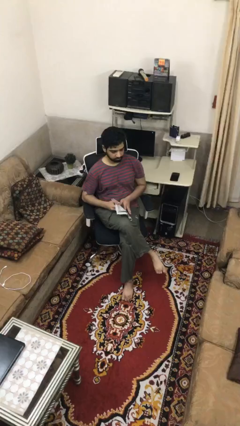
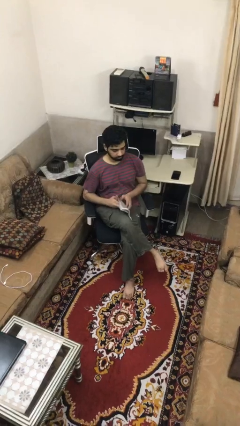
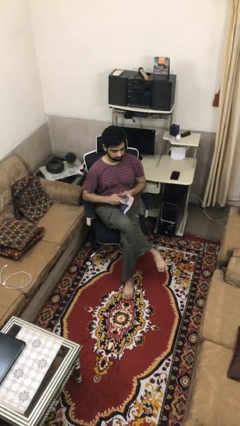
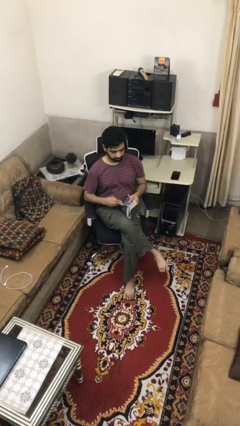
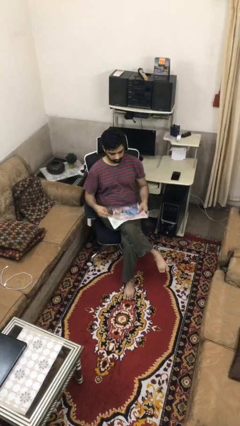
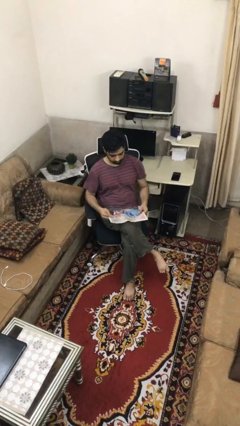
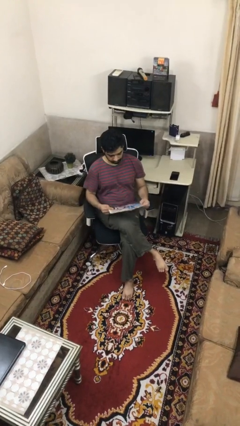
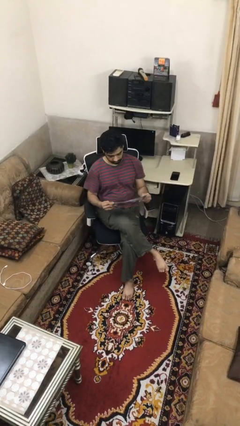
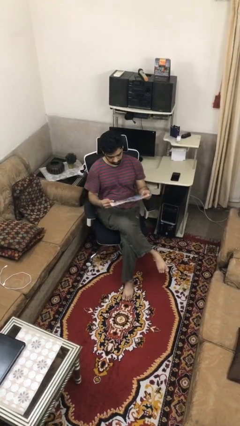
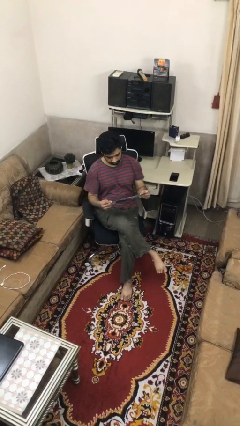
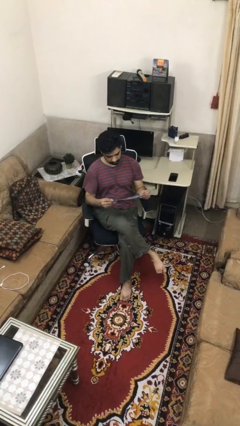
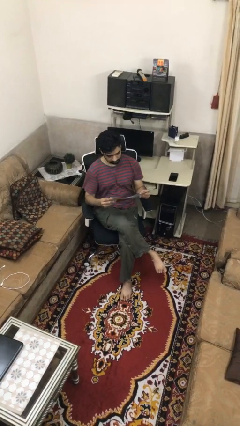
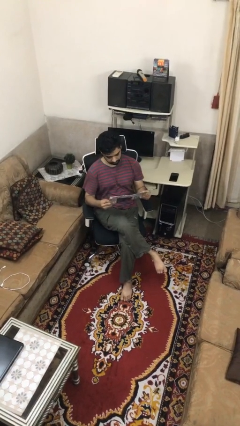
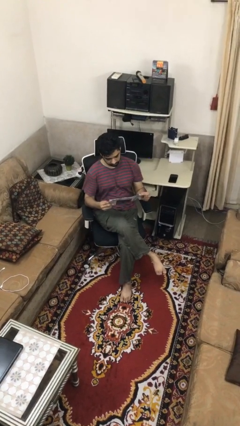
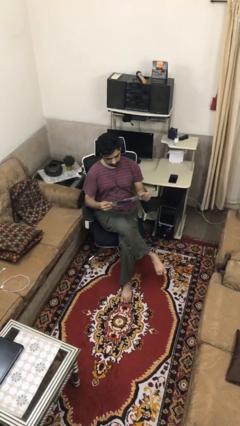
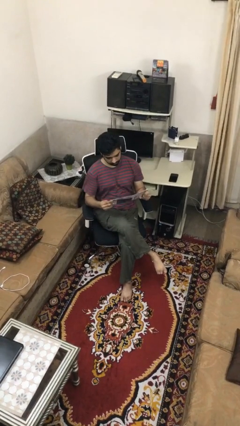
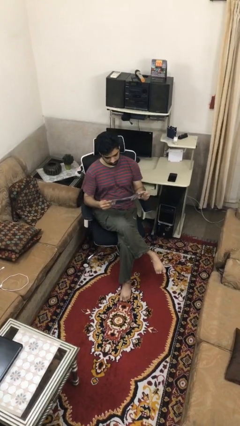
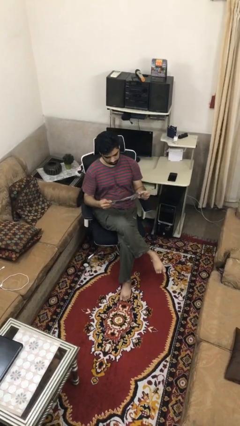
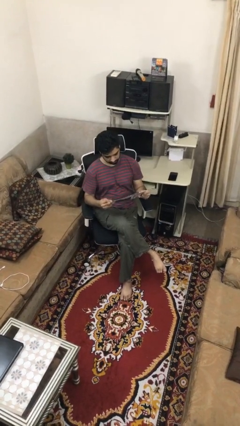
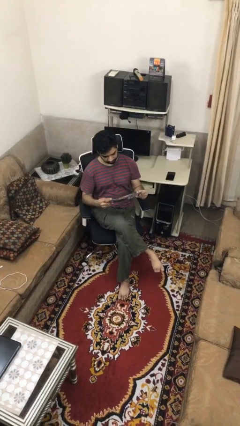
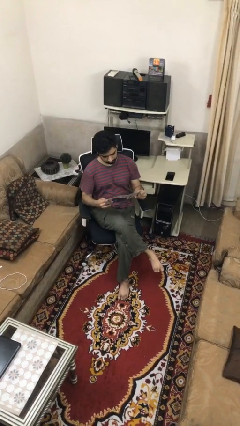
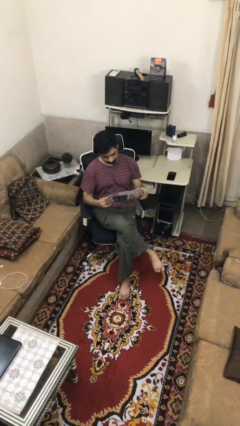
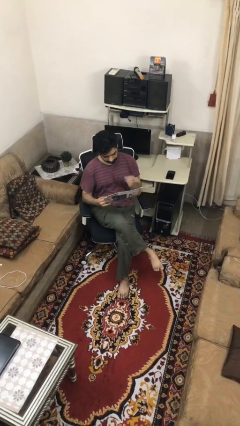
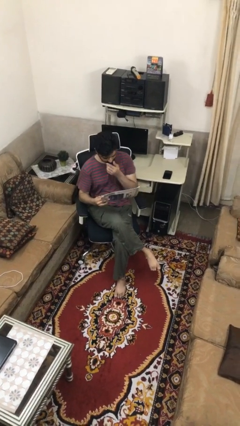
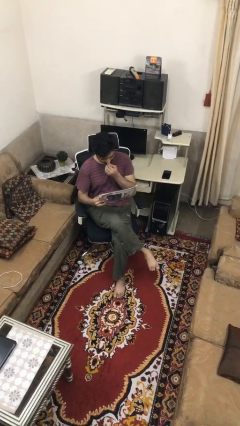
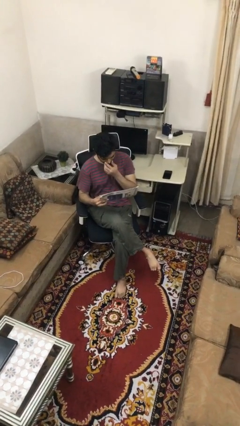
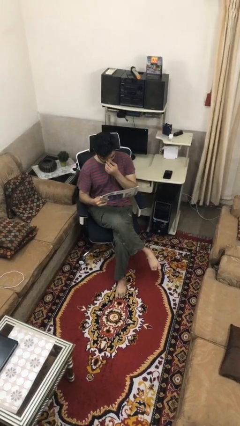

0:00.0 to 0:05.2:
person reads document

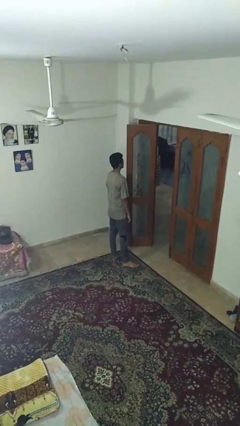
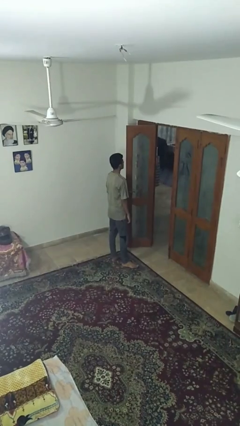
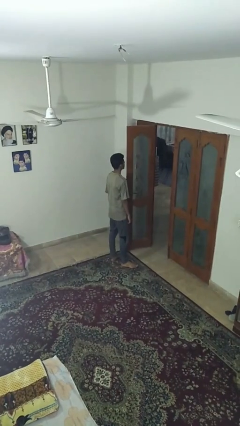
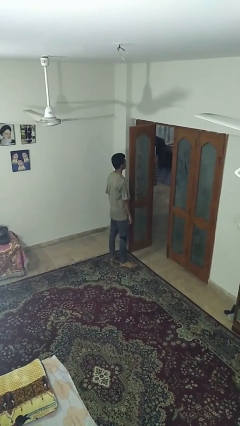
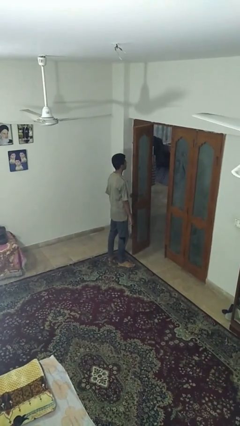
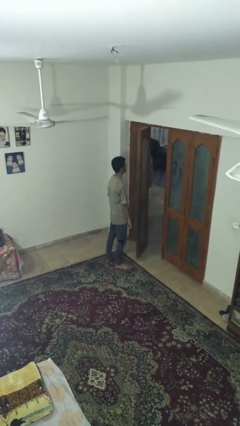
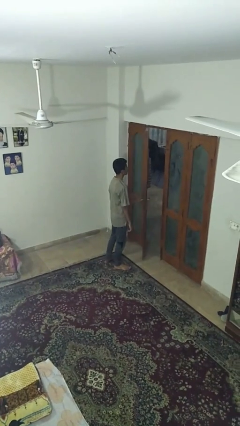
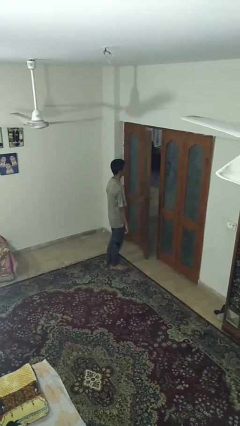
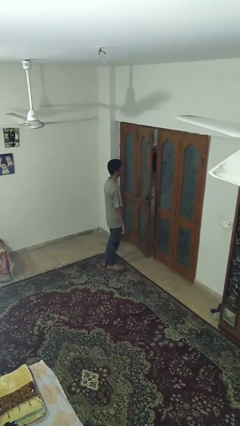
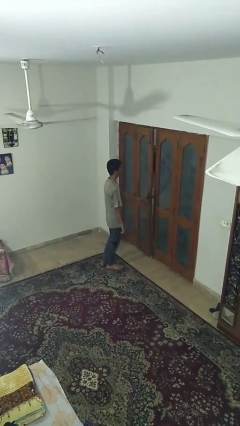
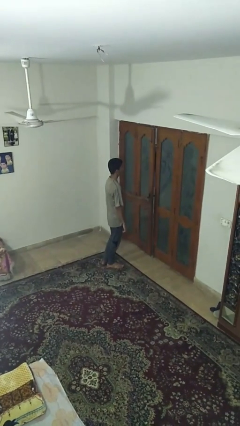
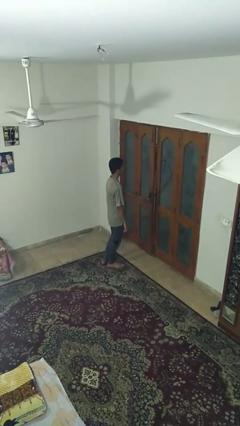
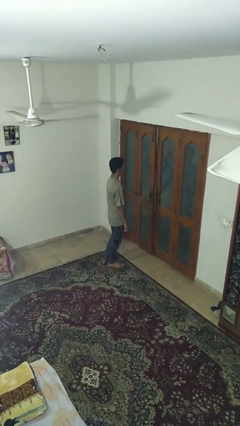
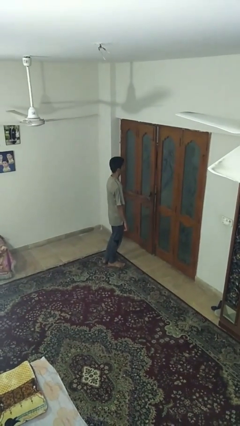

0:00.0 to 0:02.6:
person closes facility door

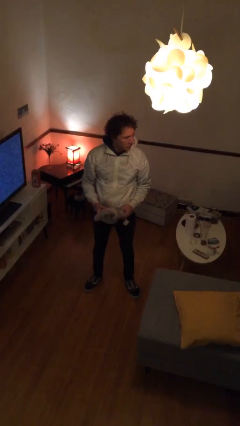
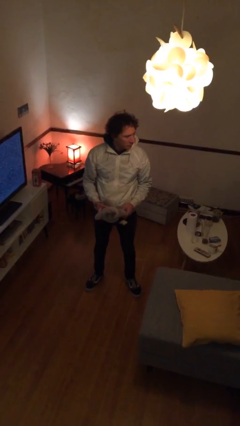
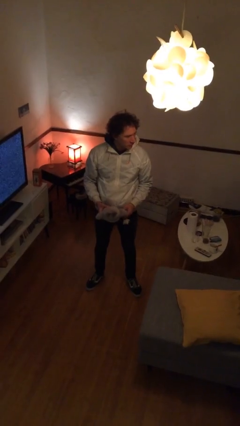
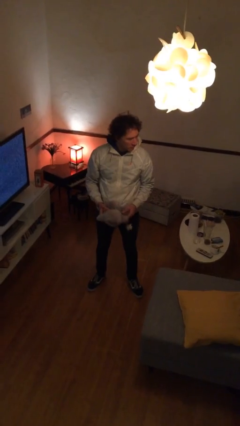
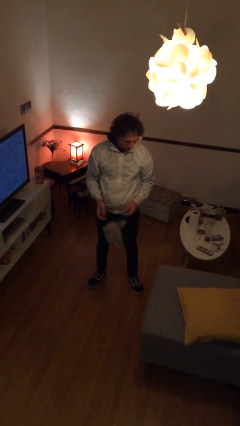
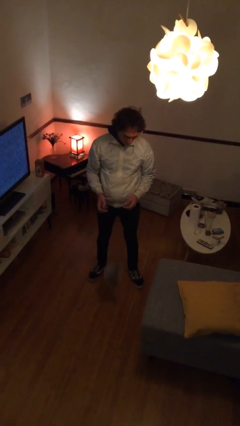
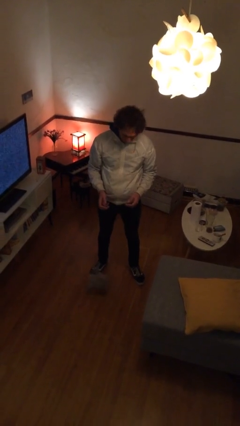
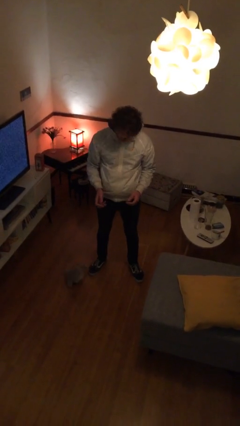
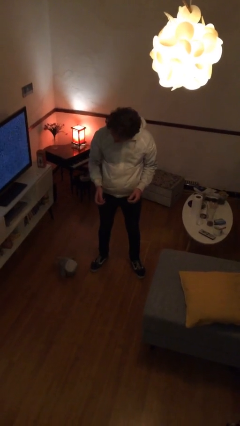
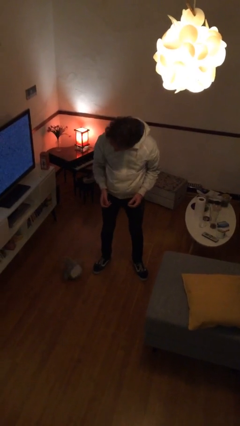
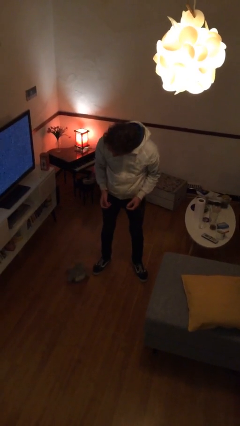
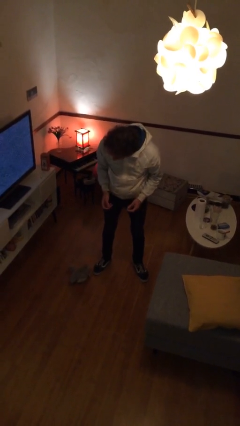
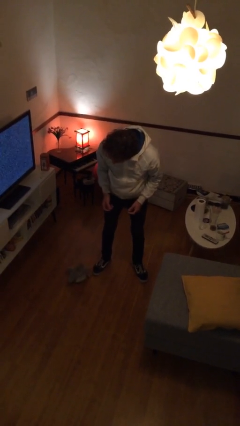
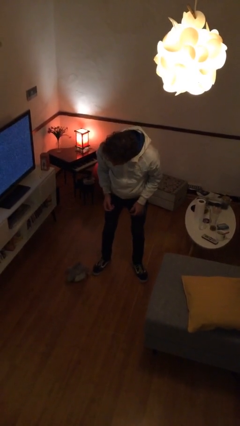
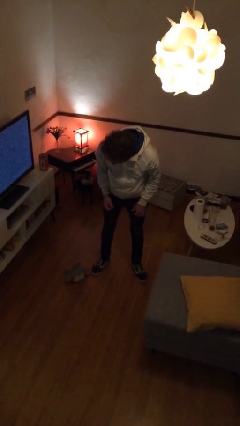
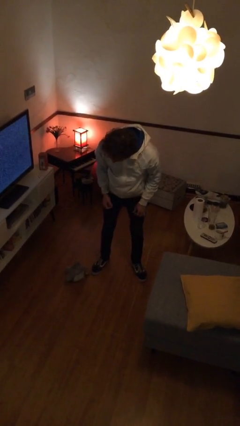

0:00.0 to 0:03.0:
person drops object

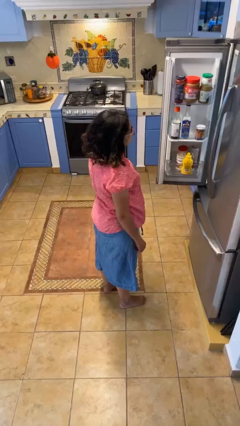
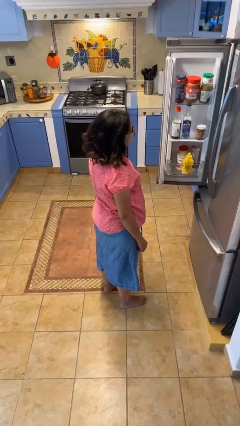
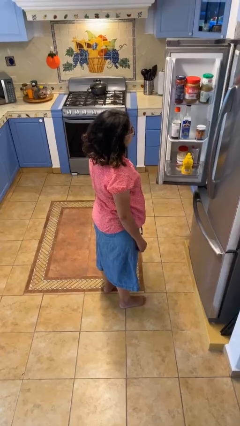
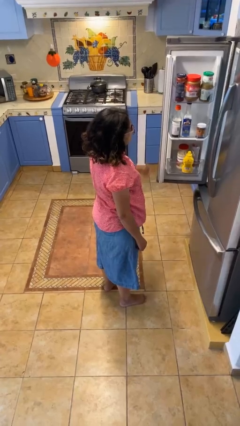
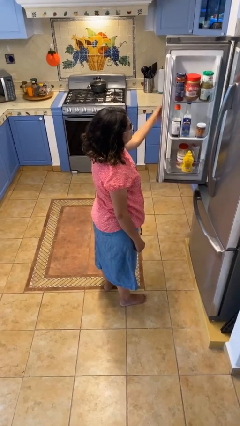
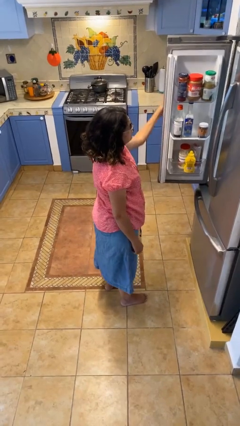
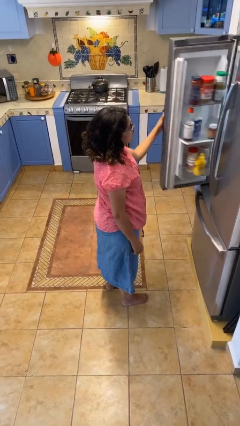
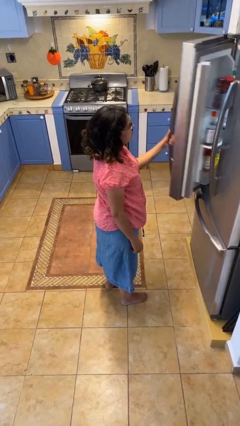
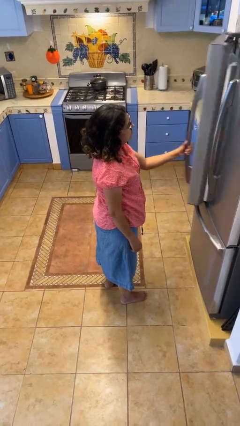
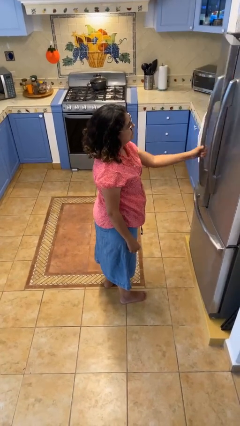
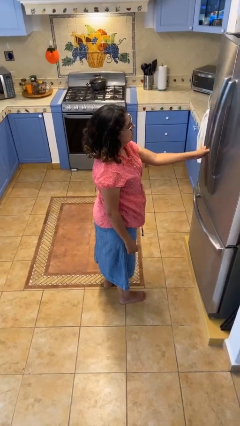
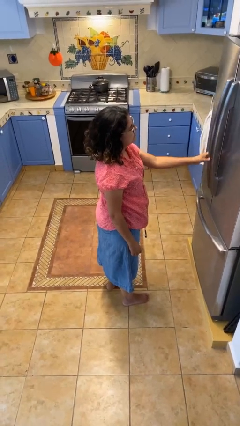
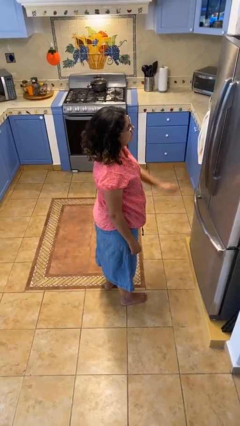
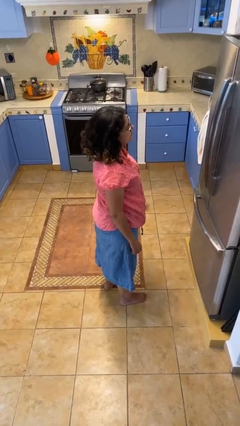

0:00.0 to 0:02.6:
person closes refrigerator

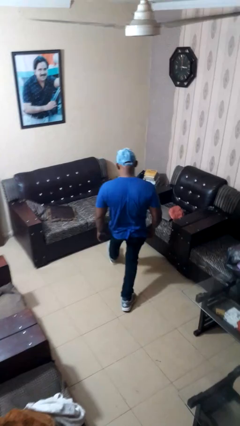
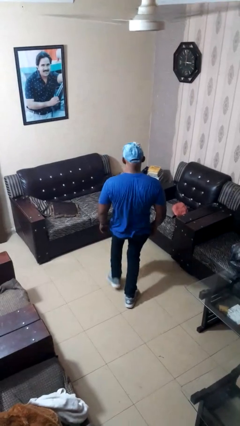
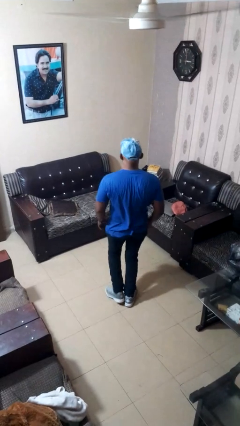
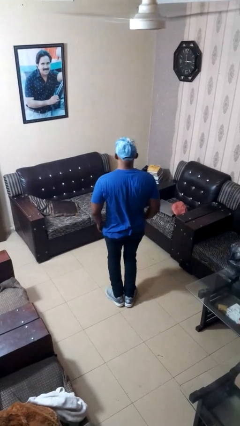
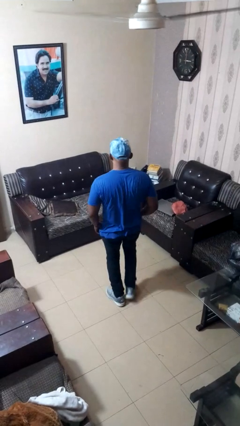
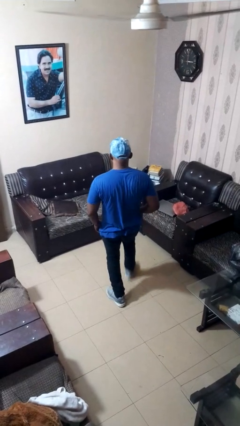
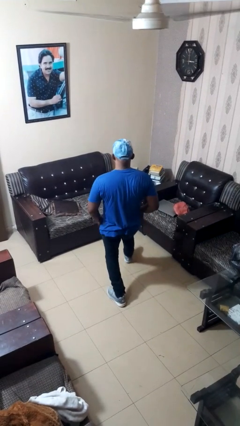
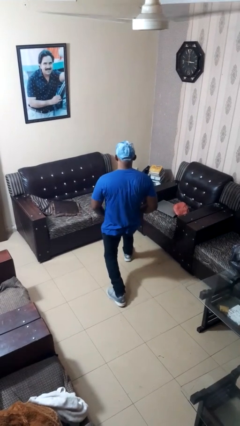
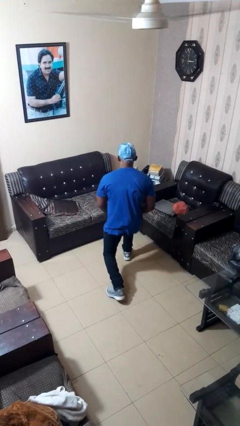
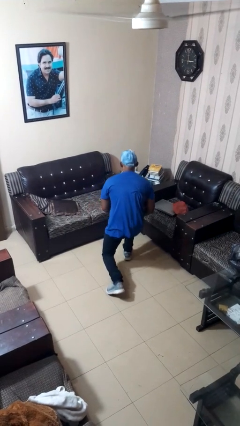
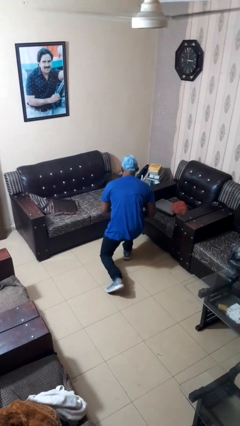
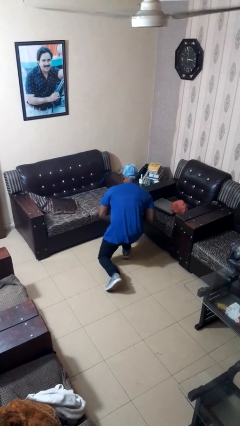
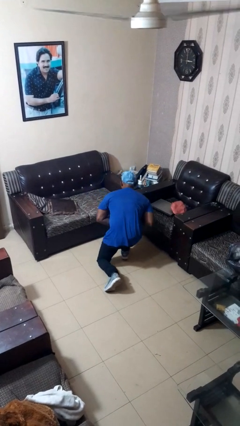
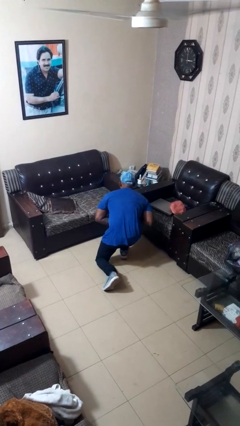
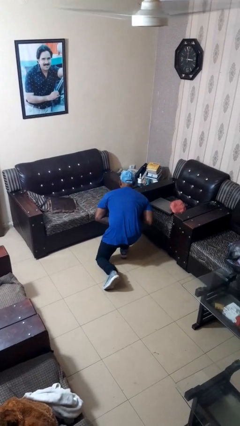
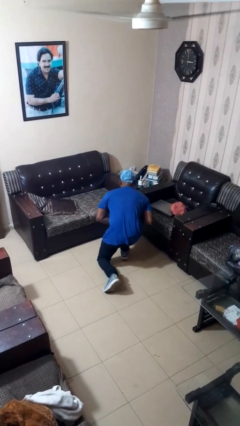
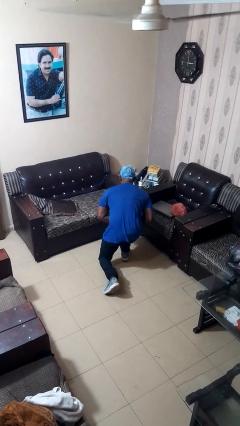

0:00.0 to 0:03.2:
person exercises with lunges

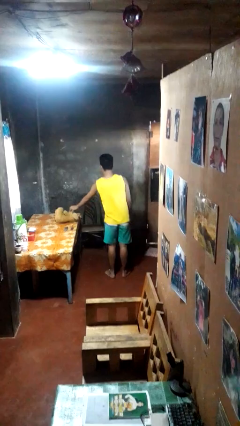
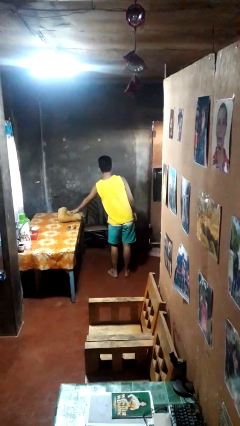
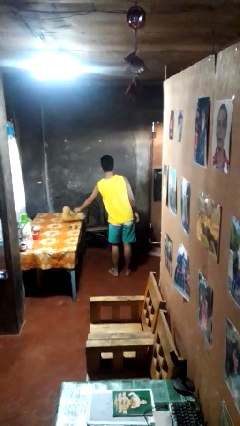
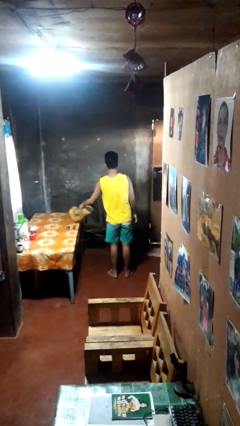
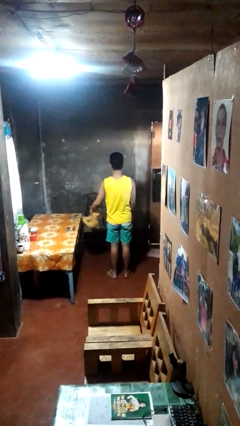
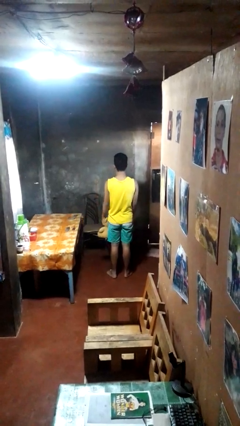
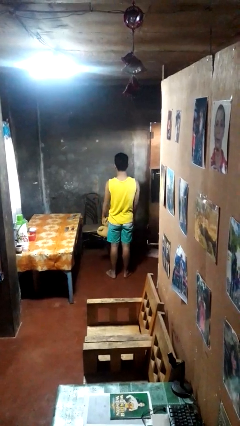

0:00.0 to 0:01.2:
person picks up object from table
